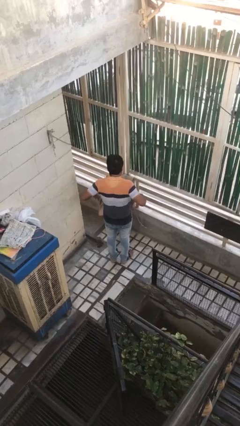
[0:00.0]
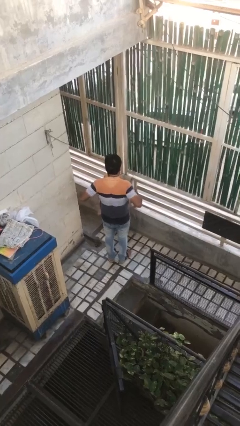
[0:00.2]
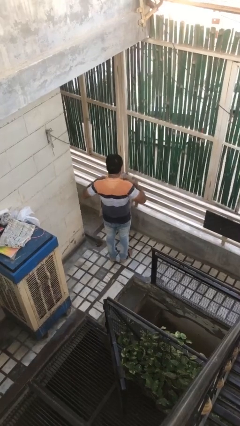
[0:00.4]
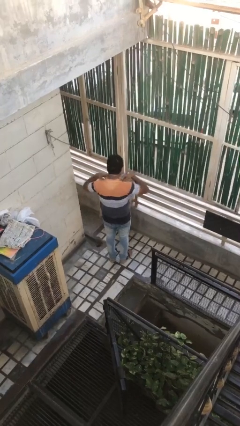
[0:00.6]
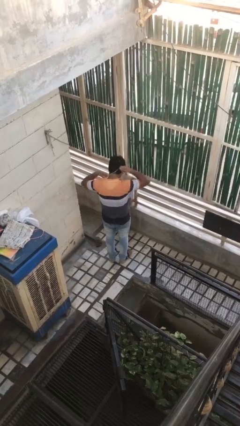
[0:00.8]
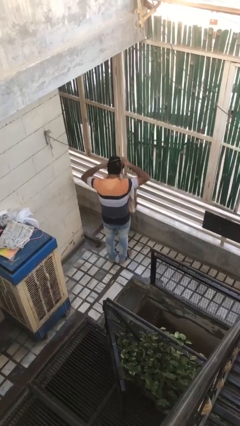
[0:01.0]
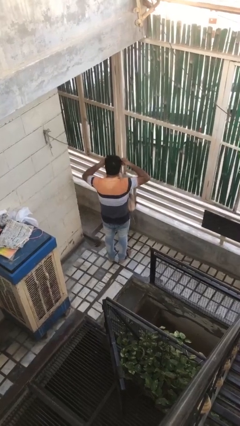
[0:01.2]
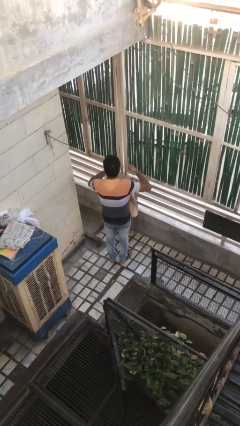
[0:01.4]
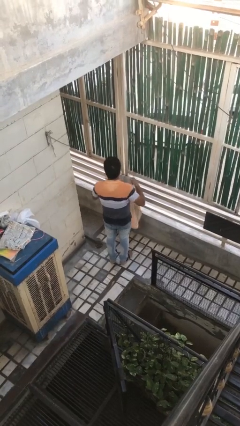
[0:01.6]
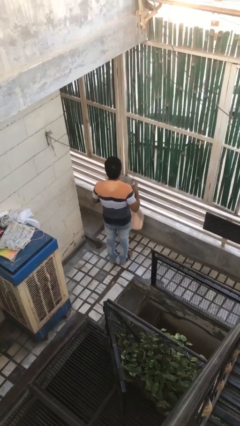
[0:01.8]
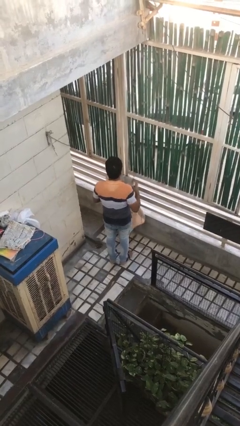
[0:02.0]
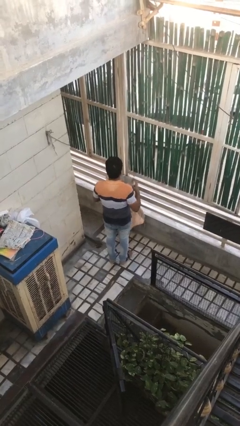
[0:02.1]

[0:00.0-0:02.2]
person takes off apron

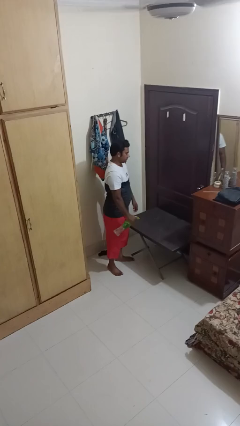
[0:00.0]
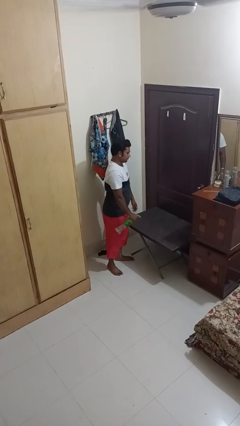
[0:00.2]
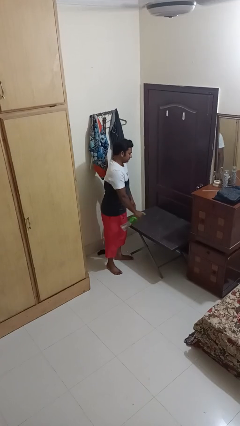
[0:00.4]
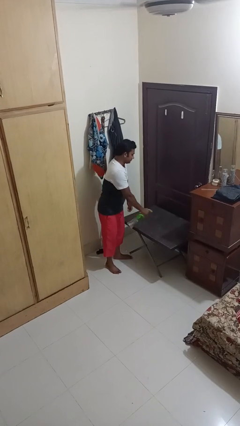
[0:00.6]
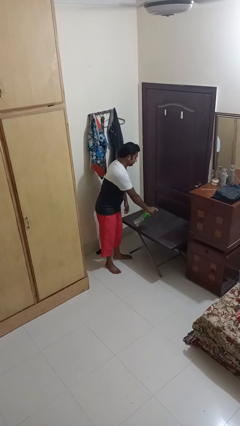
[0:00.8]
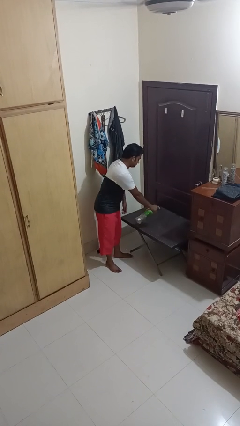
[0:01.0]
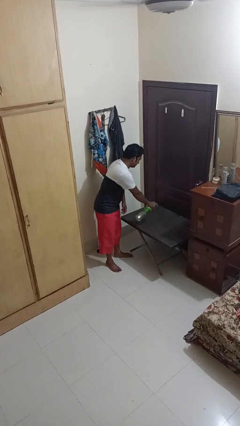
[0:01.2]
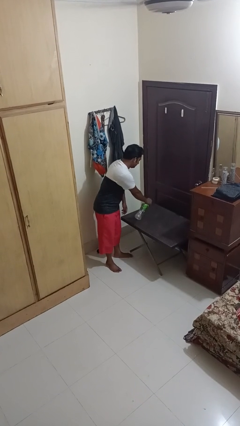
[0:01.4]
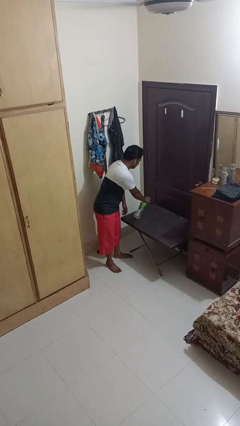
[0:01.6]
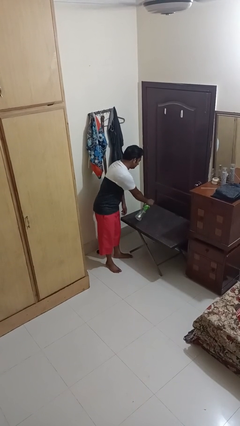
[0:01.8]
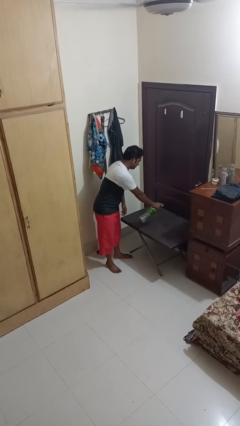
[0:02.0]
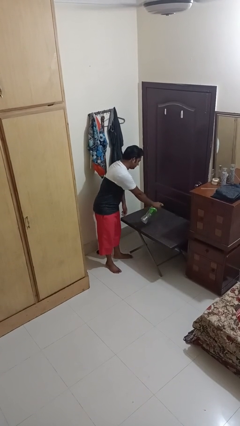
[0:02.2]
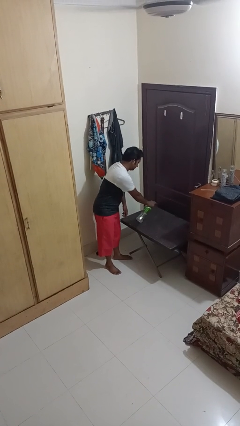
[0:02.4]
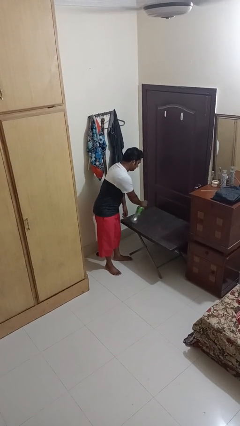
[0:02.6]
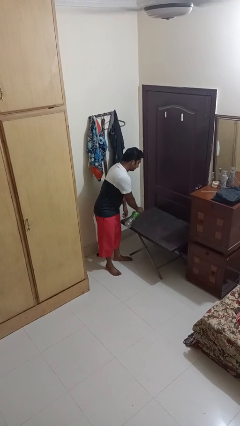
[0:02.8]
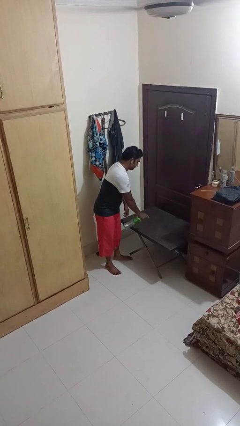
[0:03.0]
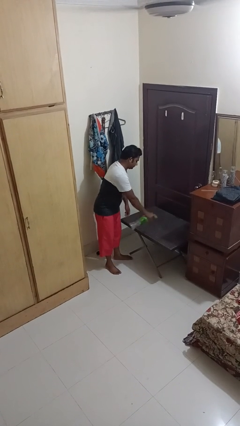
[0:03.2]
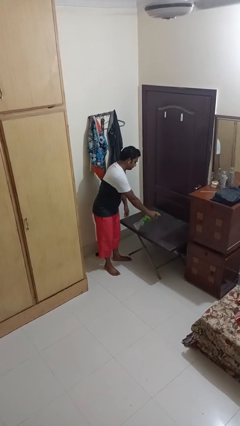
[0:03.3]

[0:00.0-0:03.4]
person sprays from bottle

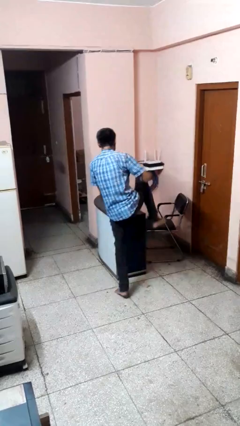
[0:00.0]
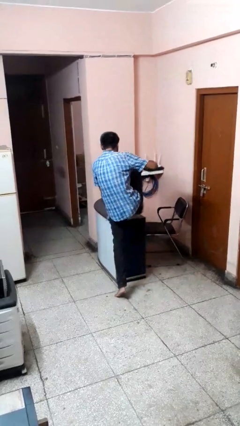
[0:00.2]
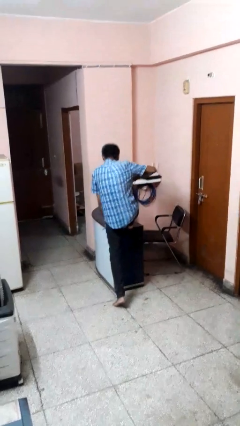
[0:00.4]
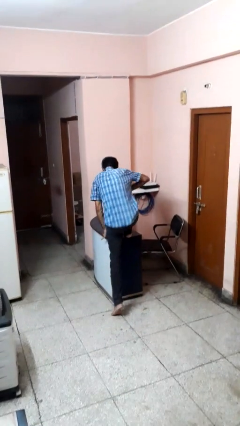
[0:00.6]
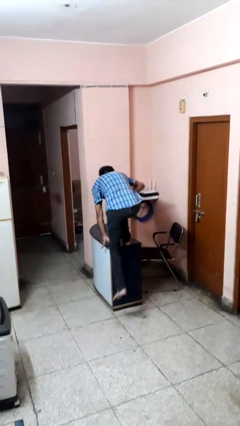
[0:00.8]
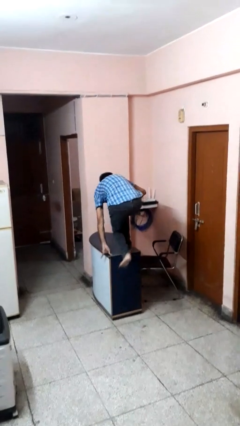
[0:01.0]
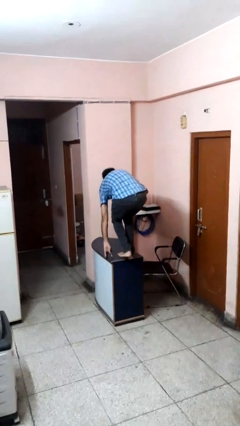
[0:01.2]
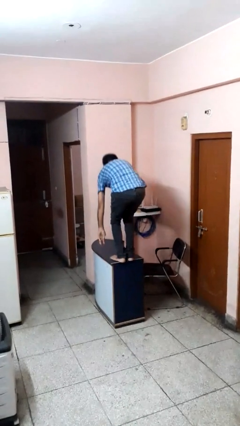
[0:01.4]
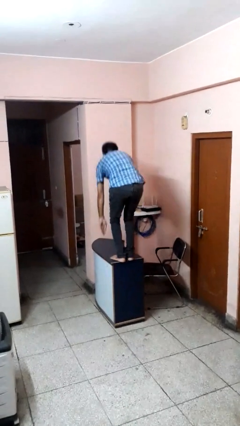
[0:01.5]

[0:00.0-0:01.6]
person climbs on table

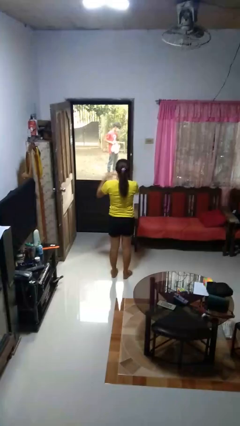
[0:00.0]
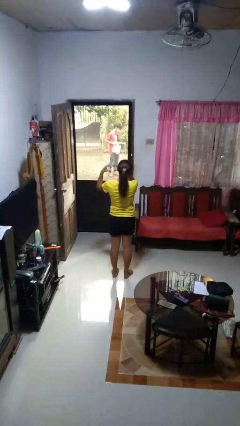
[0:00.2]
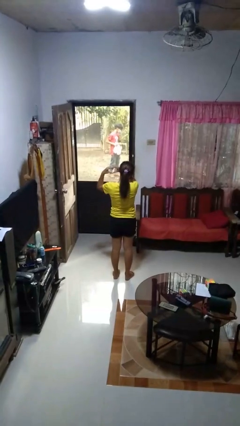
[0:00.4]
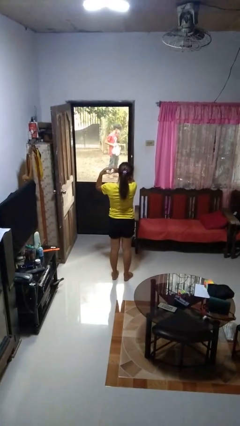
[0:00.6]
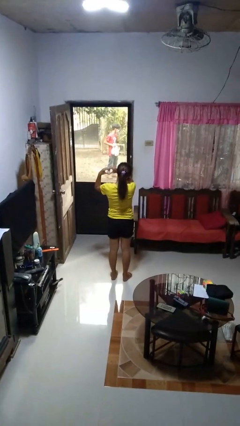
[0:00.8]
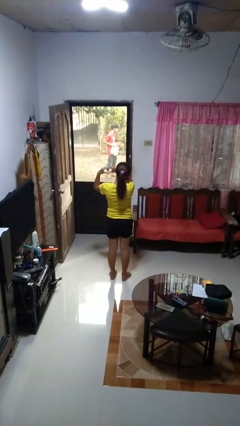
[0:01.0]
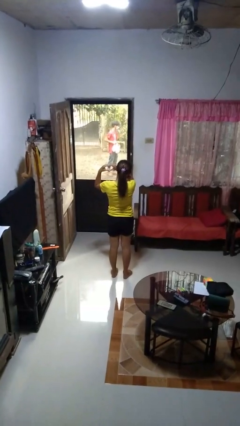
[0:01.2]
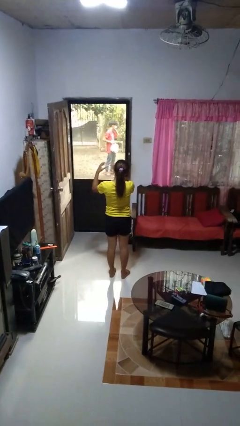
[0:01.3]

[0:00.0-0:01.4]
person gestures heart

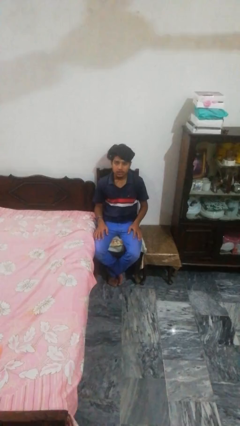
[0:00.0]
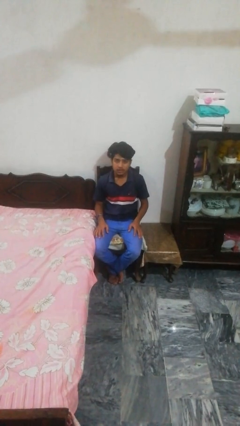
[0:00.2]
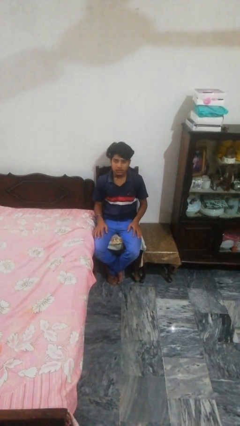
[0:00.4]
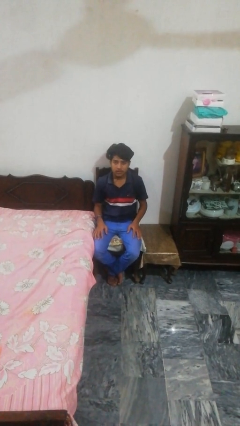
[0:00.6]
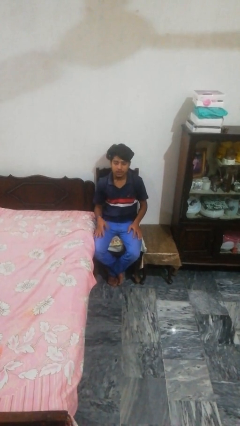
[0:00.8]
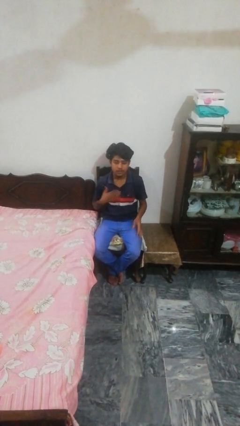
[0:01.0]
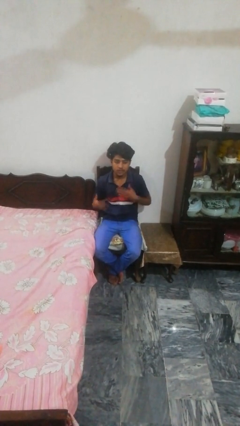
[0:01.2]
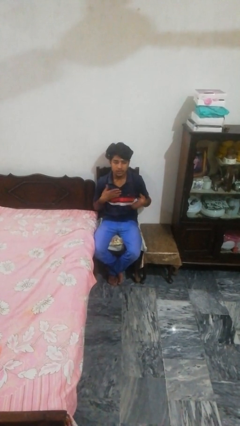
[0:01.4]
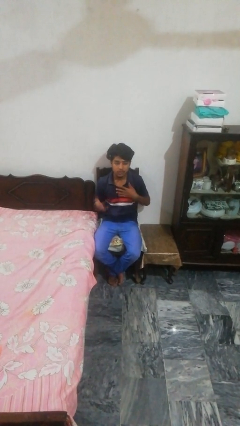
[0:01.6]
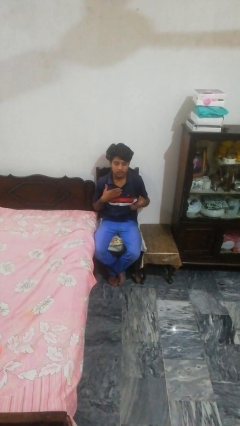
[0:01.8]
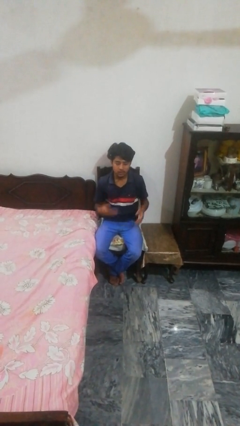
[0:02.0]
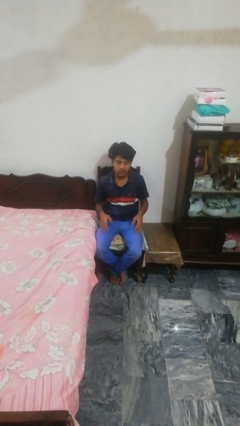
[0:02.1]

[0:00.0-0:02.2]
person drums on chest

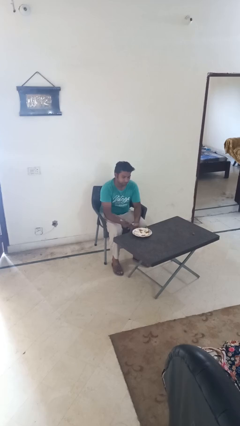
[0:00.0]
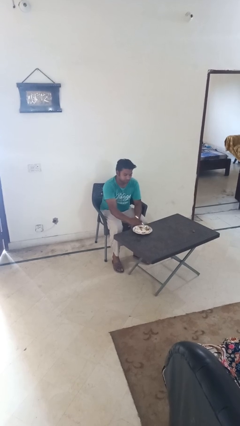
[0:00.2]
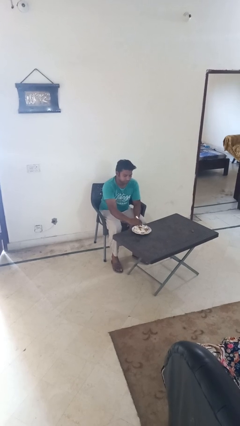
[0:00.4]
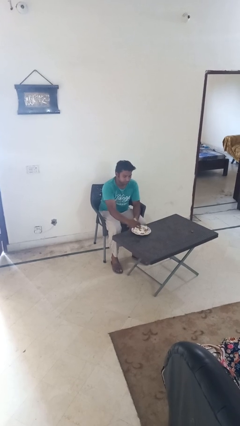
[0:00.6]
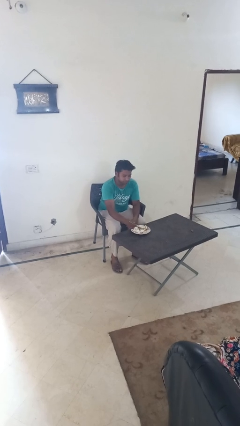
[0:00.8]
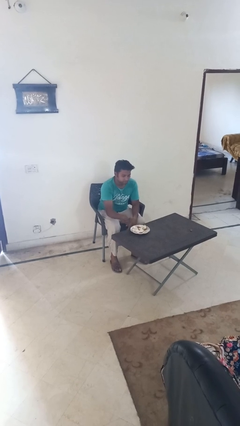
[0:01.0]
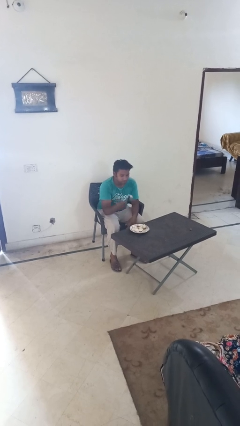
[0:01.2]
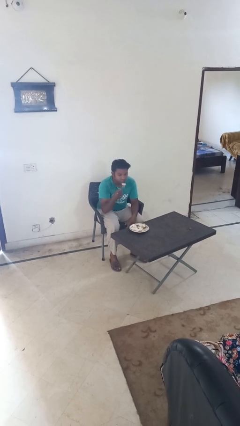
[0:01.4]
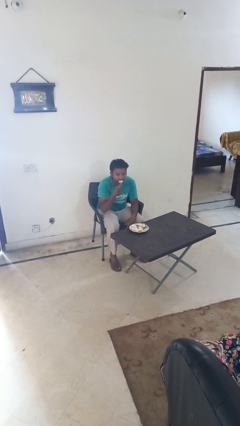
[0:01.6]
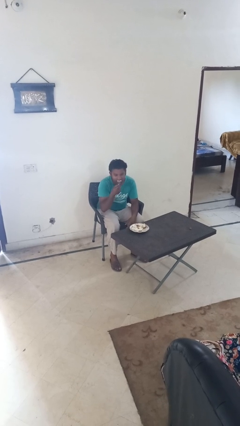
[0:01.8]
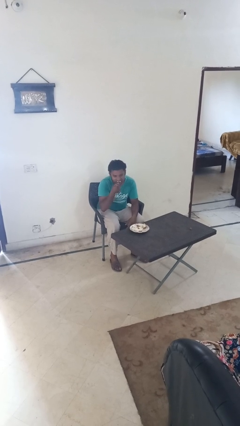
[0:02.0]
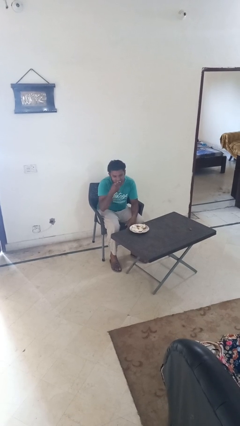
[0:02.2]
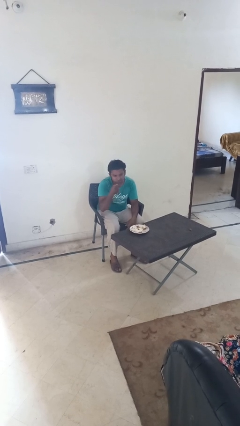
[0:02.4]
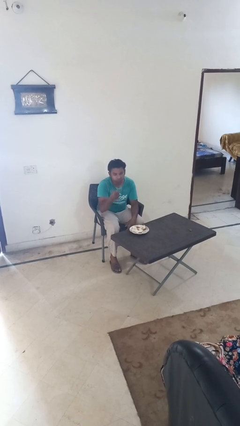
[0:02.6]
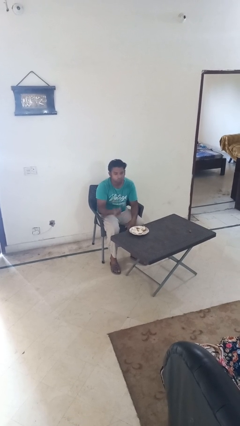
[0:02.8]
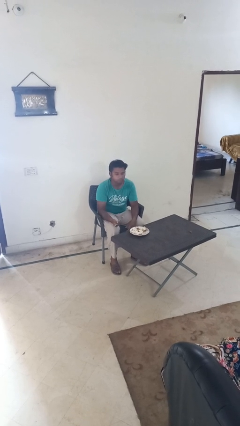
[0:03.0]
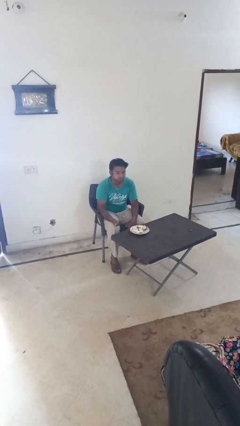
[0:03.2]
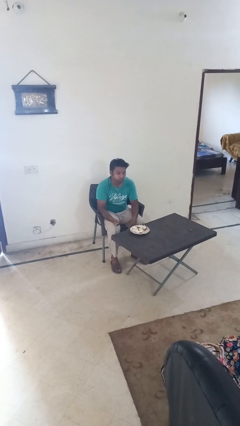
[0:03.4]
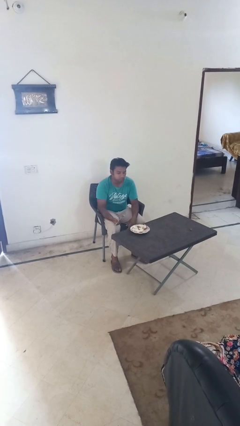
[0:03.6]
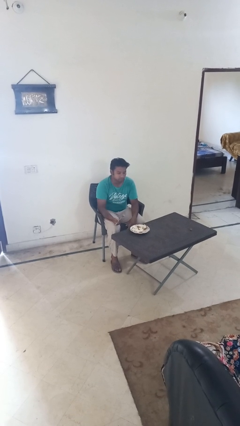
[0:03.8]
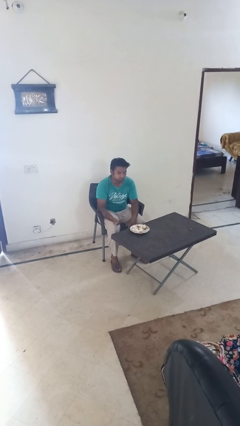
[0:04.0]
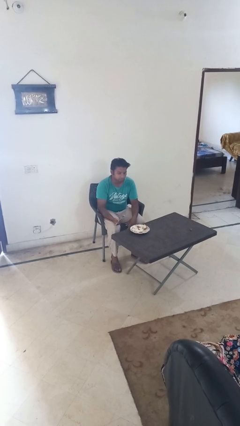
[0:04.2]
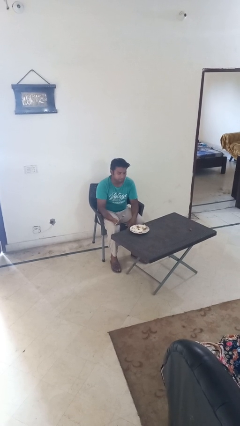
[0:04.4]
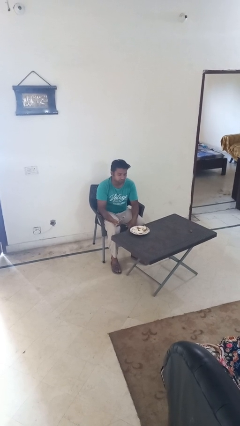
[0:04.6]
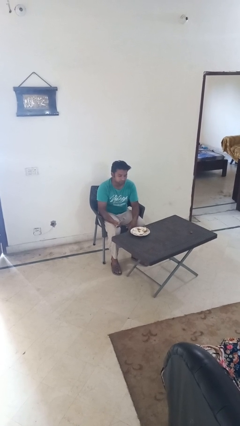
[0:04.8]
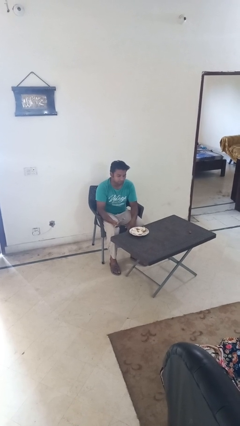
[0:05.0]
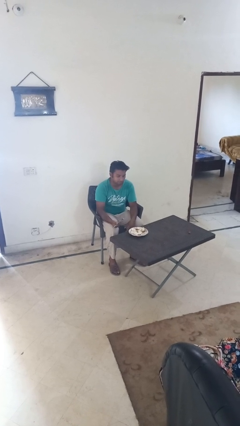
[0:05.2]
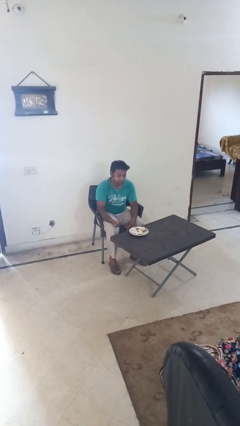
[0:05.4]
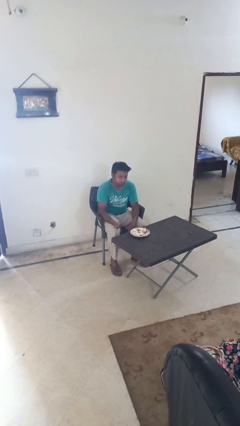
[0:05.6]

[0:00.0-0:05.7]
person eats with utensil

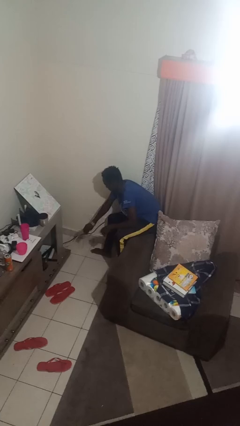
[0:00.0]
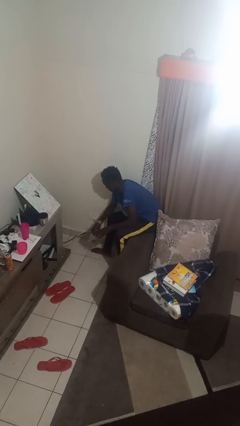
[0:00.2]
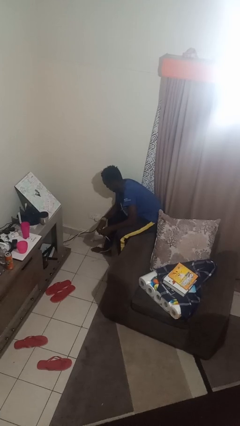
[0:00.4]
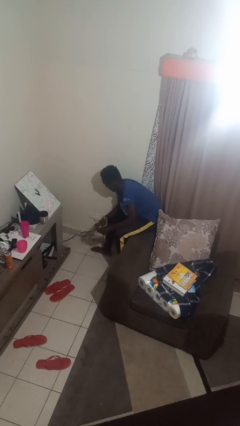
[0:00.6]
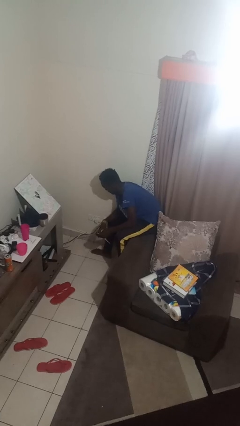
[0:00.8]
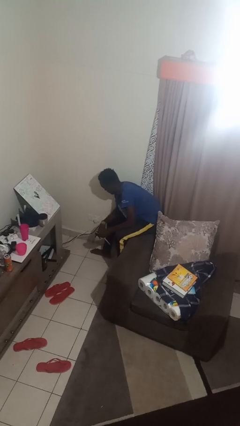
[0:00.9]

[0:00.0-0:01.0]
person unplugs from electrical socket
